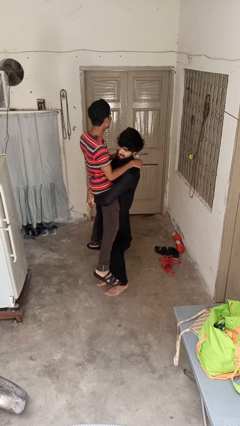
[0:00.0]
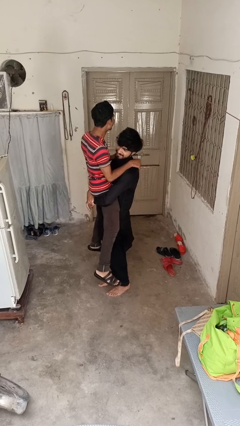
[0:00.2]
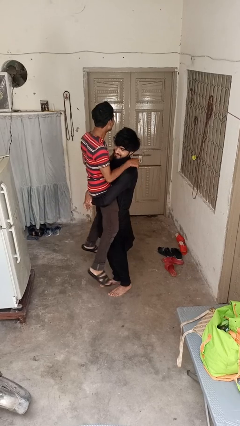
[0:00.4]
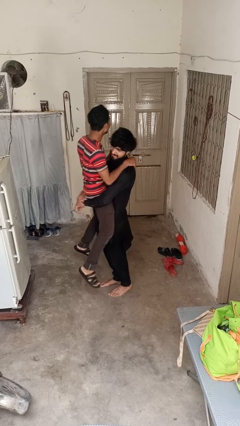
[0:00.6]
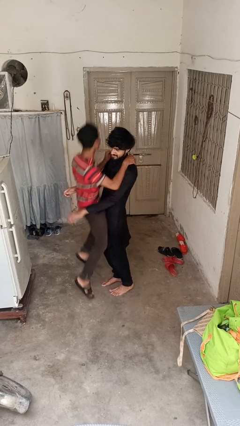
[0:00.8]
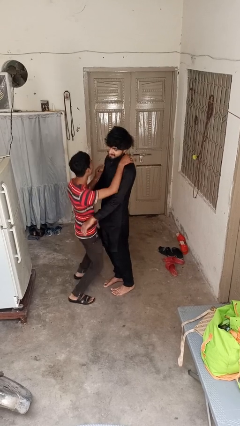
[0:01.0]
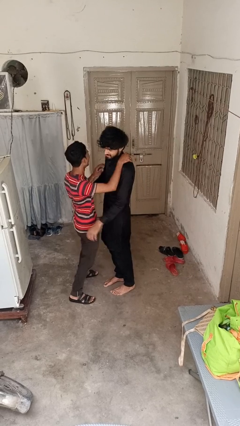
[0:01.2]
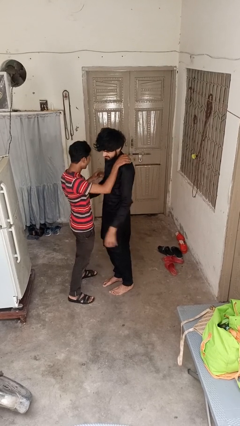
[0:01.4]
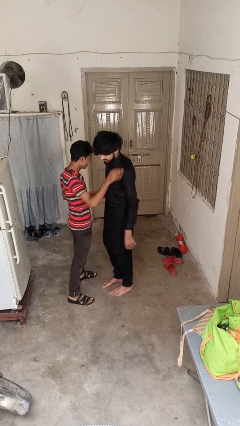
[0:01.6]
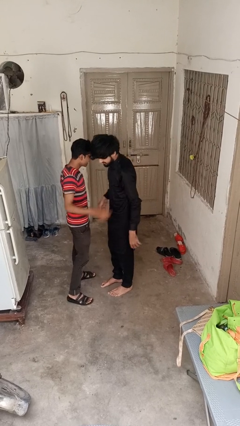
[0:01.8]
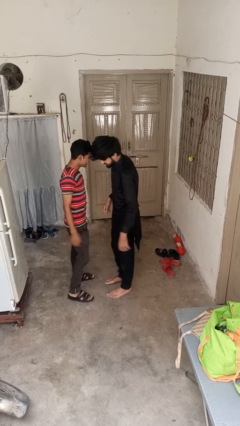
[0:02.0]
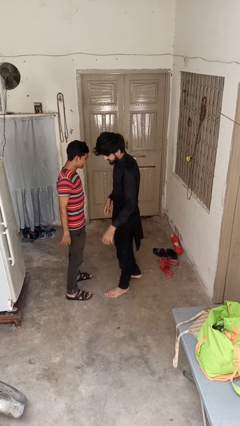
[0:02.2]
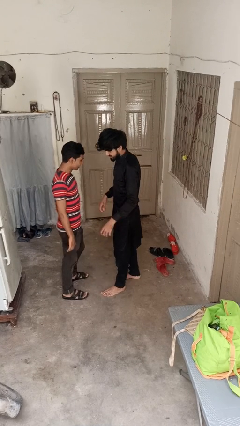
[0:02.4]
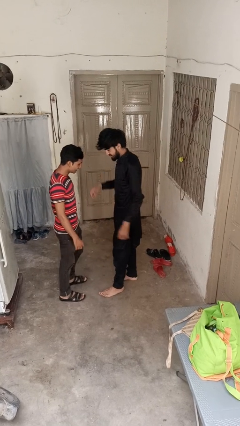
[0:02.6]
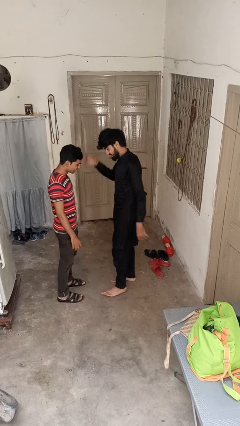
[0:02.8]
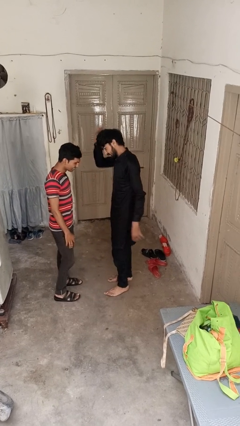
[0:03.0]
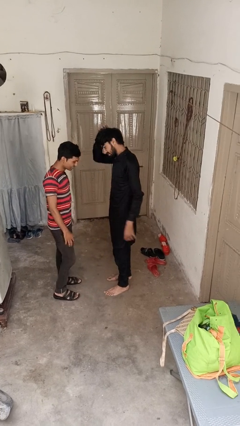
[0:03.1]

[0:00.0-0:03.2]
person puts down person

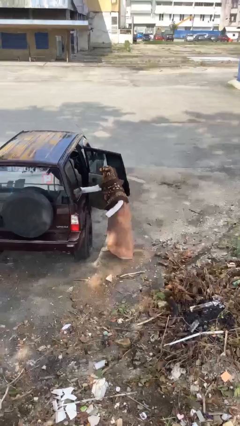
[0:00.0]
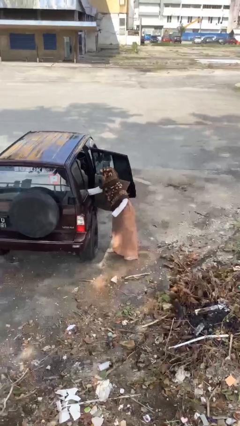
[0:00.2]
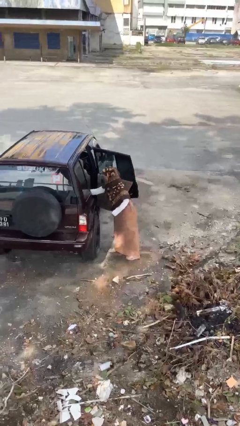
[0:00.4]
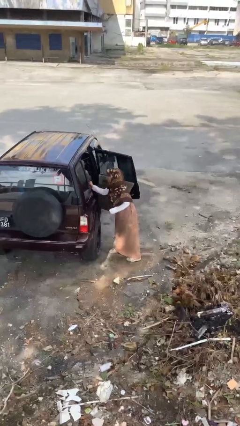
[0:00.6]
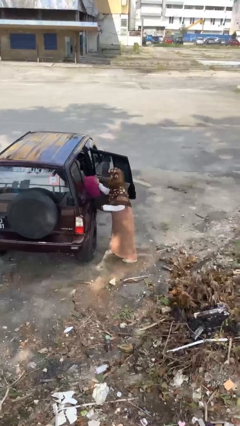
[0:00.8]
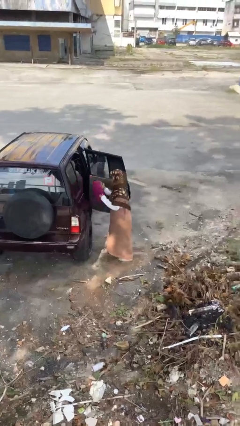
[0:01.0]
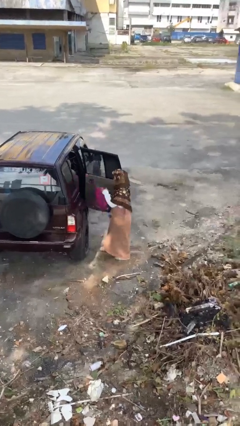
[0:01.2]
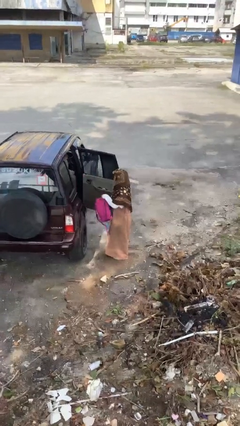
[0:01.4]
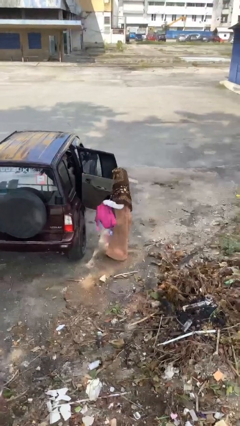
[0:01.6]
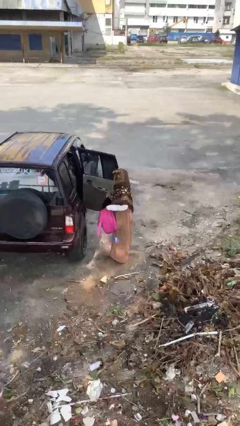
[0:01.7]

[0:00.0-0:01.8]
person unloads car

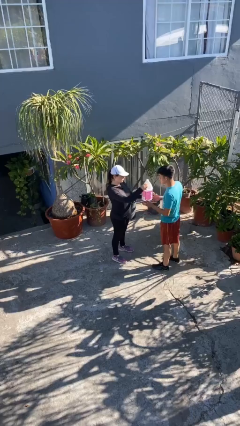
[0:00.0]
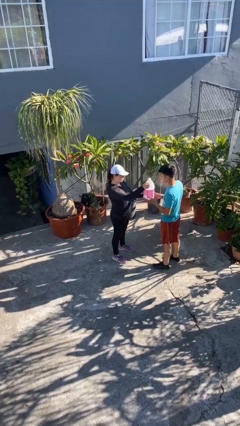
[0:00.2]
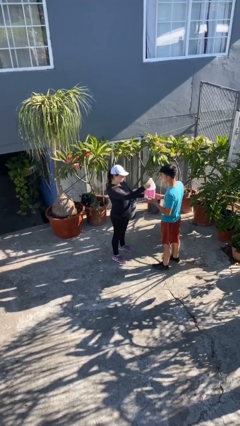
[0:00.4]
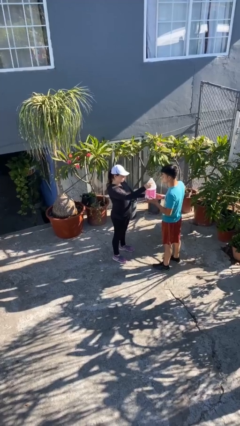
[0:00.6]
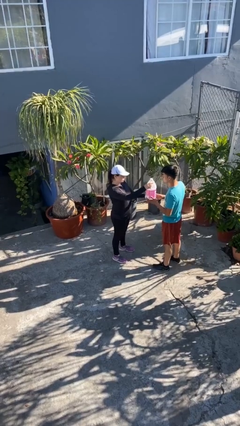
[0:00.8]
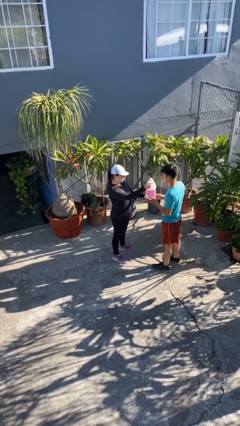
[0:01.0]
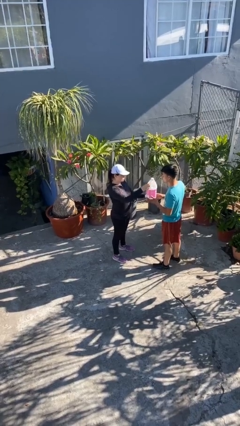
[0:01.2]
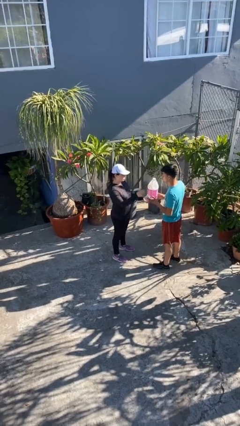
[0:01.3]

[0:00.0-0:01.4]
person transfers object to person

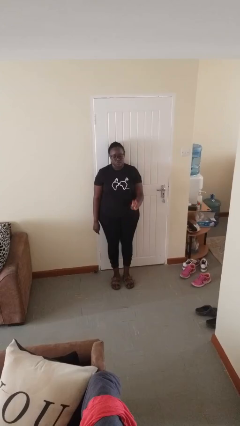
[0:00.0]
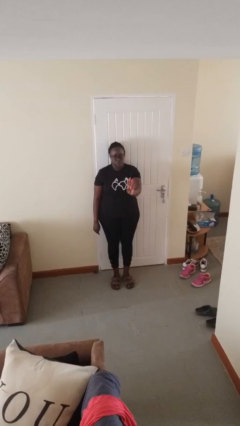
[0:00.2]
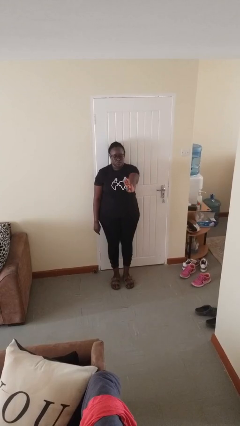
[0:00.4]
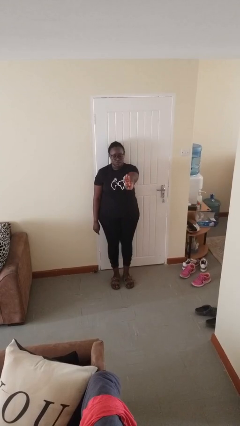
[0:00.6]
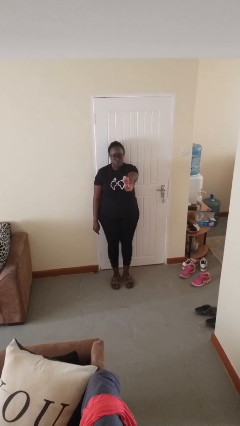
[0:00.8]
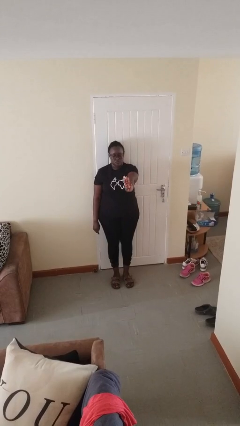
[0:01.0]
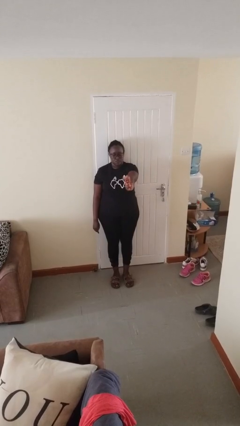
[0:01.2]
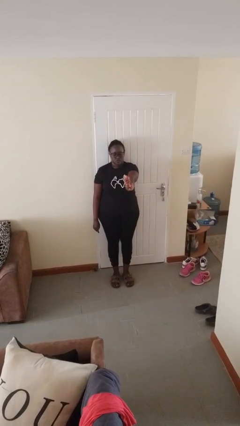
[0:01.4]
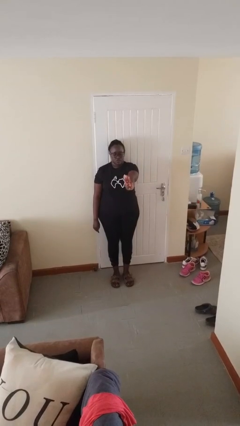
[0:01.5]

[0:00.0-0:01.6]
person gestures number three

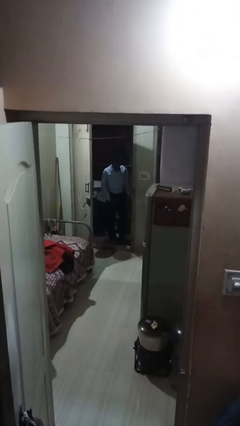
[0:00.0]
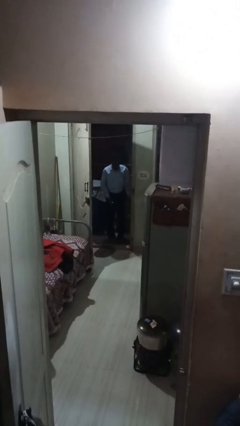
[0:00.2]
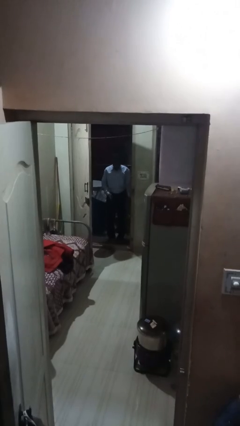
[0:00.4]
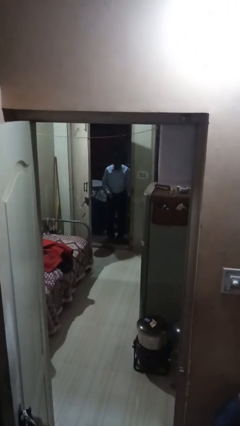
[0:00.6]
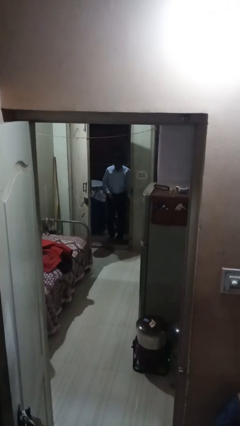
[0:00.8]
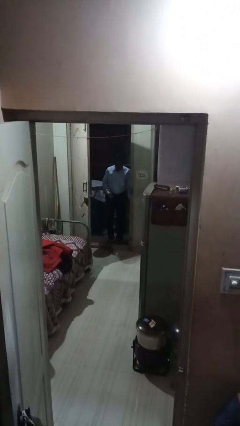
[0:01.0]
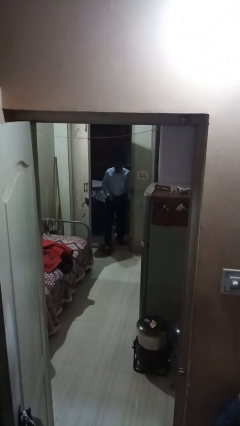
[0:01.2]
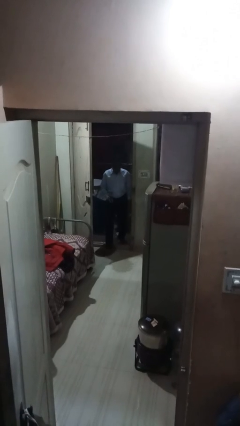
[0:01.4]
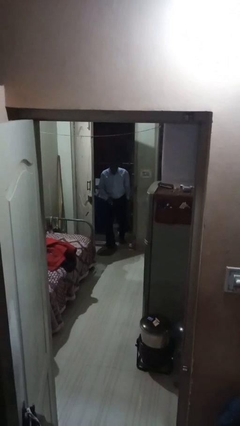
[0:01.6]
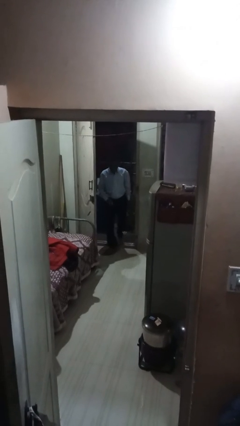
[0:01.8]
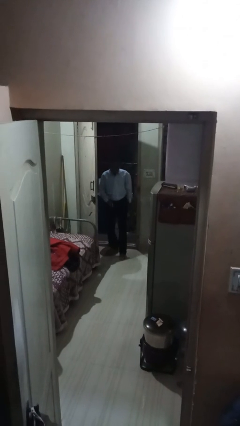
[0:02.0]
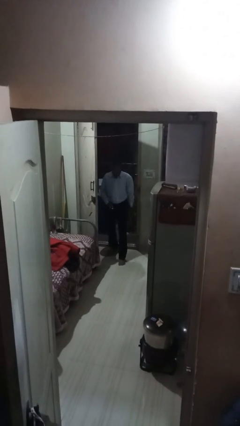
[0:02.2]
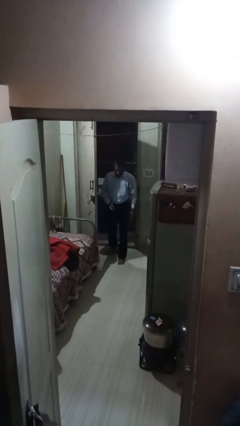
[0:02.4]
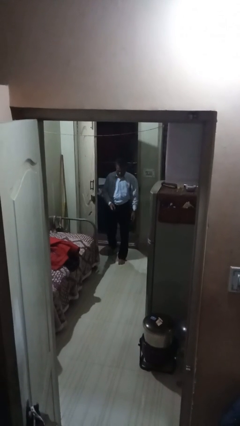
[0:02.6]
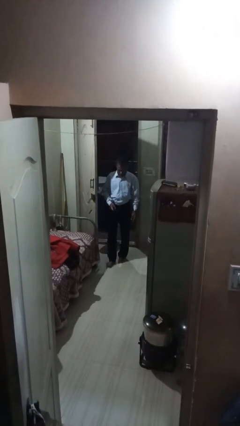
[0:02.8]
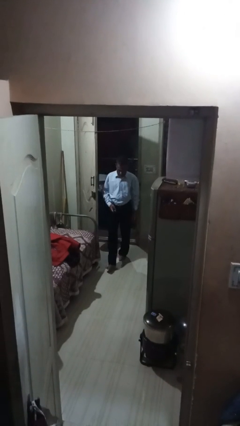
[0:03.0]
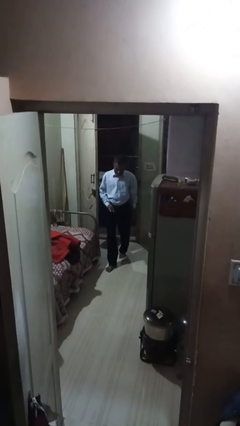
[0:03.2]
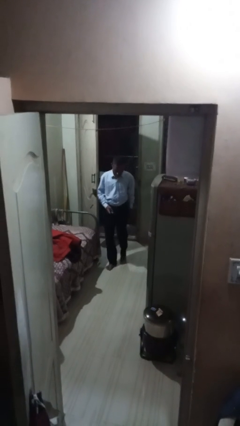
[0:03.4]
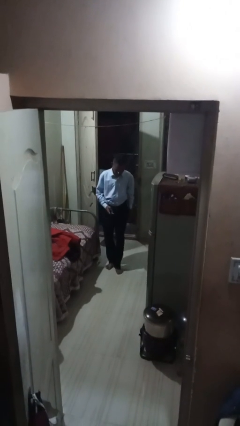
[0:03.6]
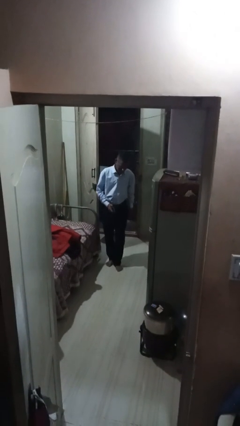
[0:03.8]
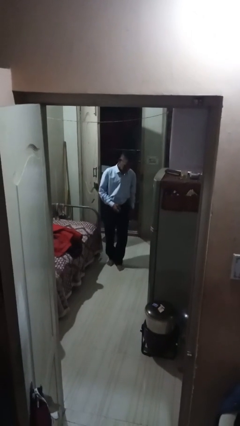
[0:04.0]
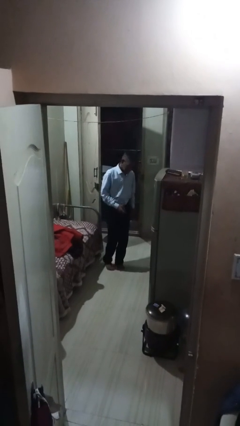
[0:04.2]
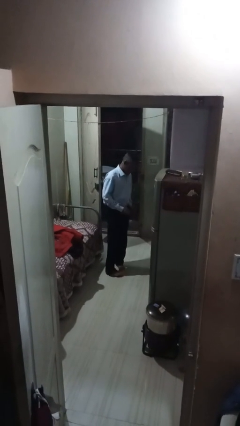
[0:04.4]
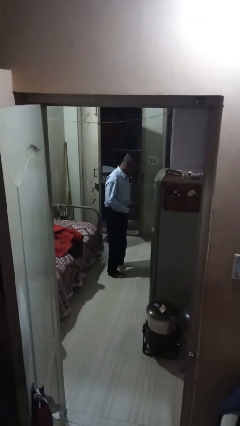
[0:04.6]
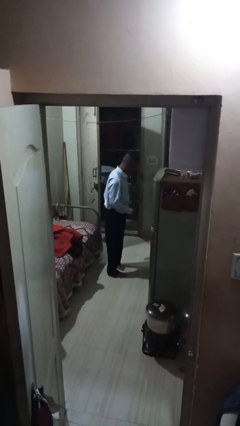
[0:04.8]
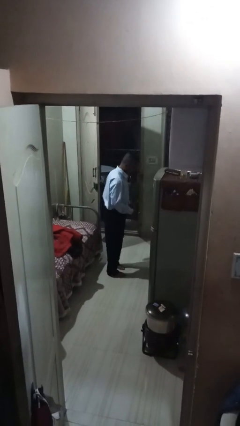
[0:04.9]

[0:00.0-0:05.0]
person enters scene through structure

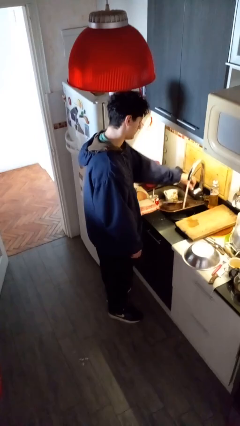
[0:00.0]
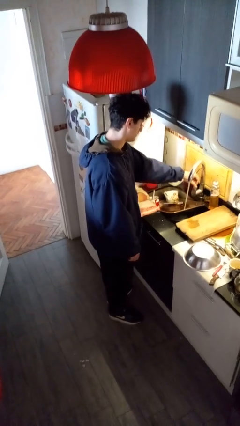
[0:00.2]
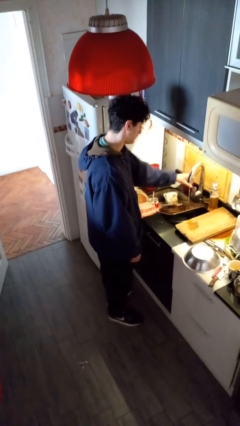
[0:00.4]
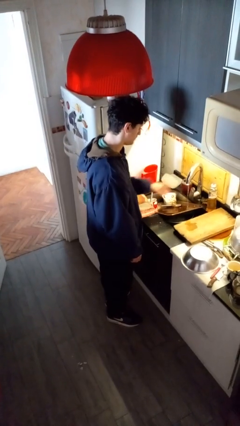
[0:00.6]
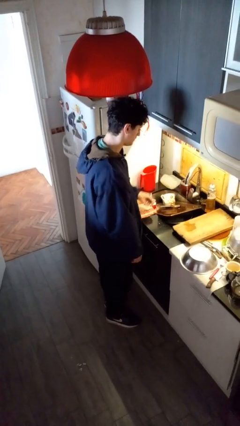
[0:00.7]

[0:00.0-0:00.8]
person turns off faucet

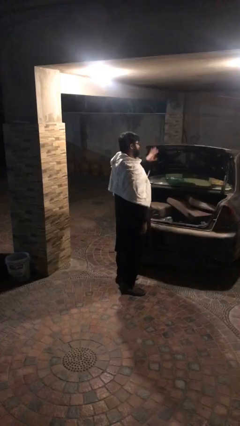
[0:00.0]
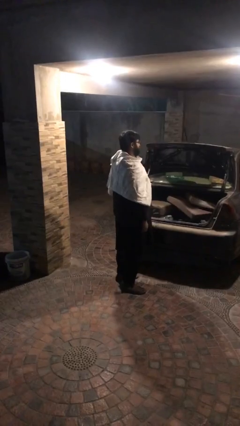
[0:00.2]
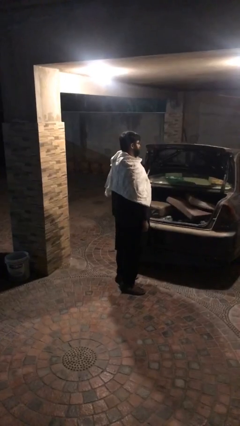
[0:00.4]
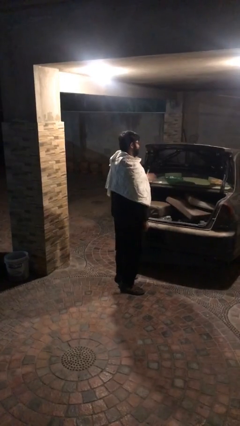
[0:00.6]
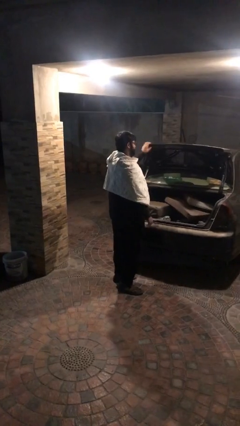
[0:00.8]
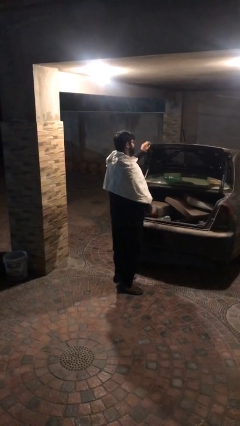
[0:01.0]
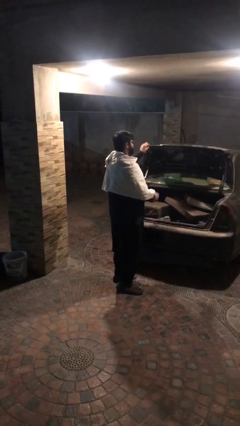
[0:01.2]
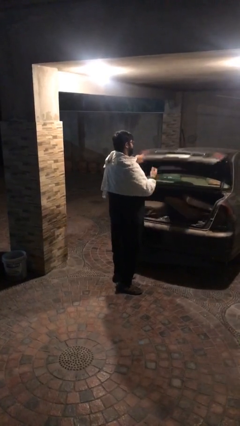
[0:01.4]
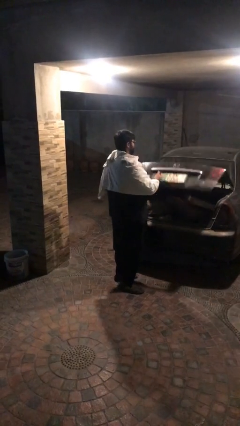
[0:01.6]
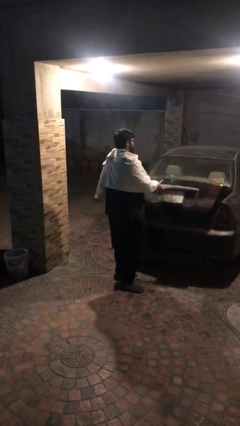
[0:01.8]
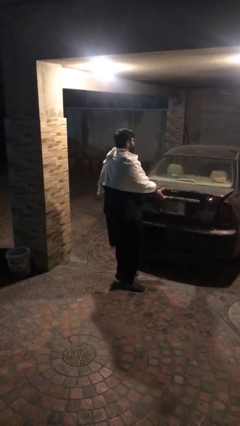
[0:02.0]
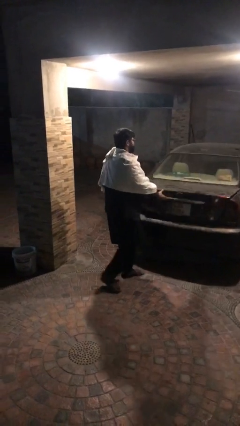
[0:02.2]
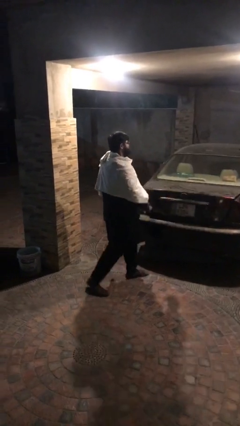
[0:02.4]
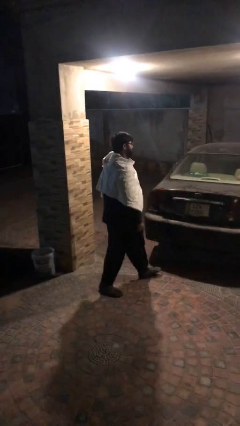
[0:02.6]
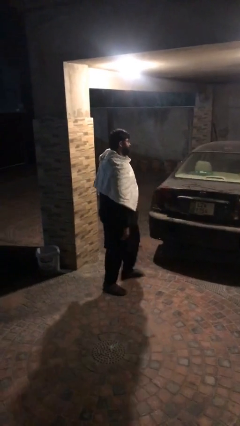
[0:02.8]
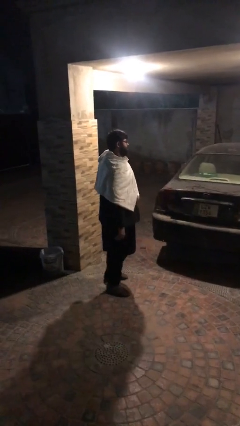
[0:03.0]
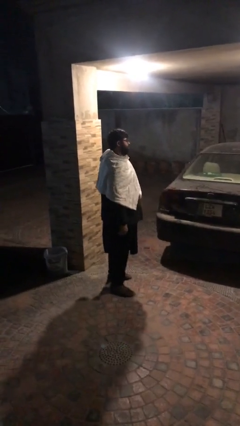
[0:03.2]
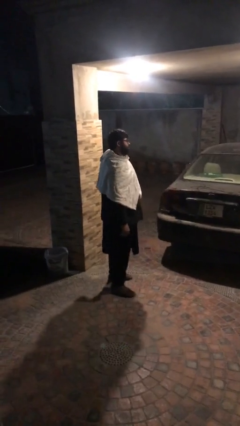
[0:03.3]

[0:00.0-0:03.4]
person closes car trunk
